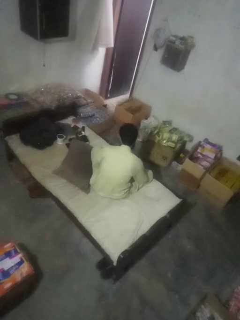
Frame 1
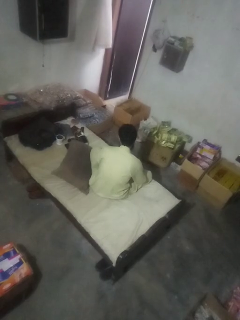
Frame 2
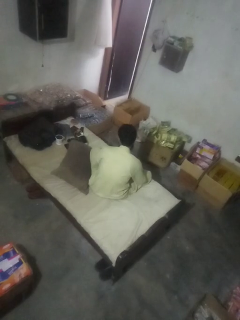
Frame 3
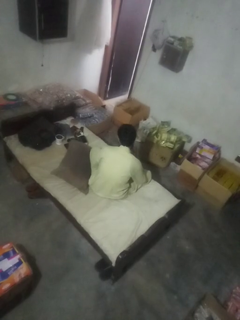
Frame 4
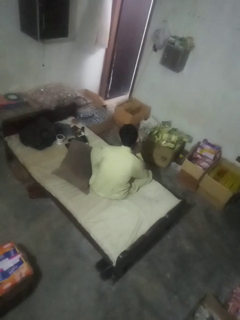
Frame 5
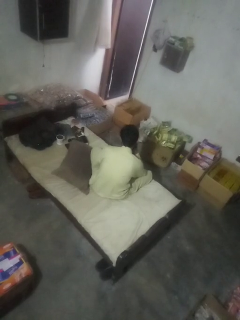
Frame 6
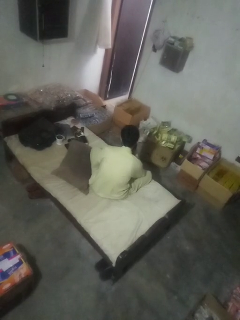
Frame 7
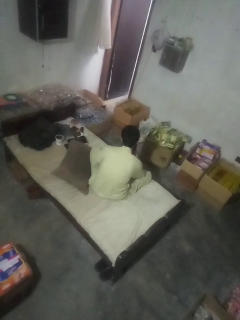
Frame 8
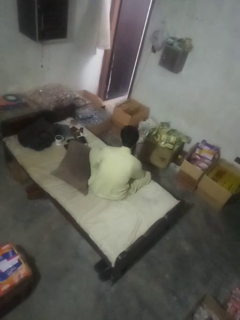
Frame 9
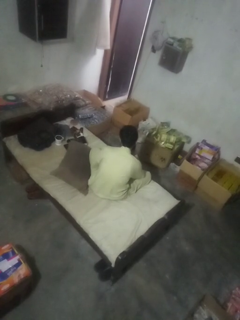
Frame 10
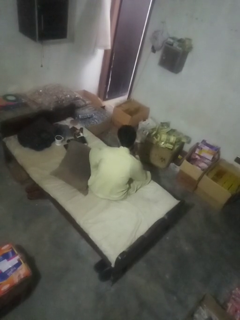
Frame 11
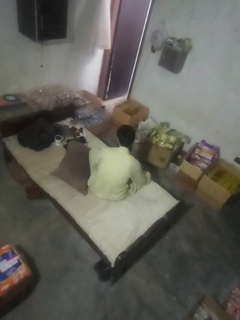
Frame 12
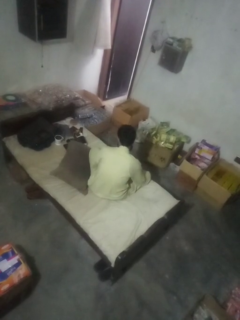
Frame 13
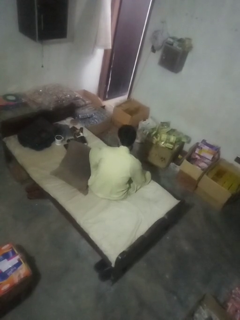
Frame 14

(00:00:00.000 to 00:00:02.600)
person strokes chin

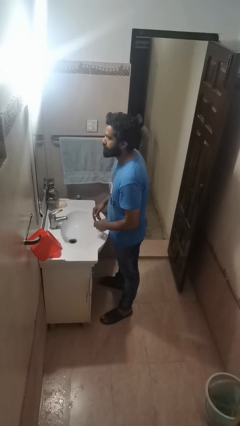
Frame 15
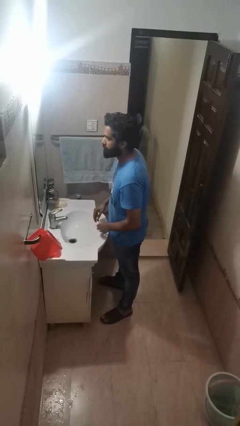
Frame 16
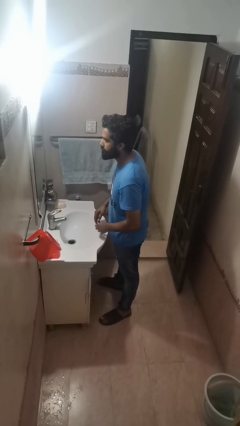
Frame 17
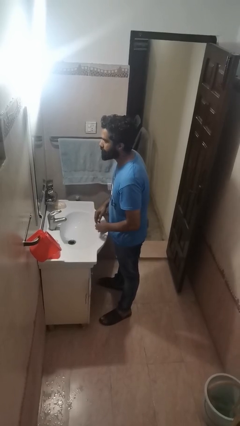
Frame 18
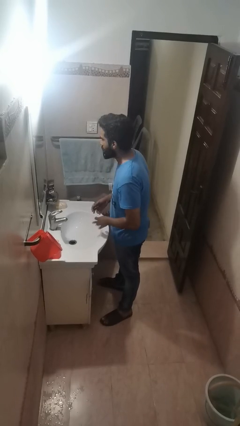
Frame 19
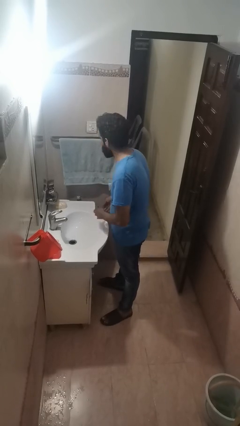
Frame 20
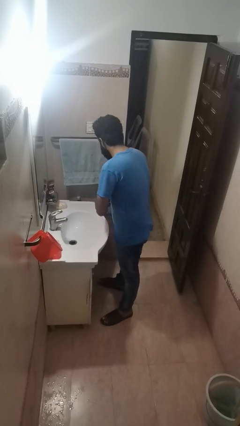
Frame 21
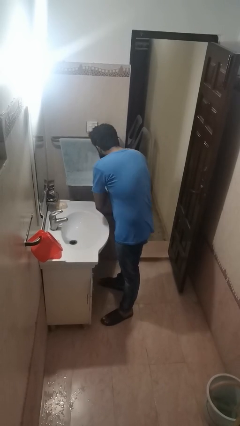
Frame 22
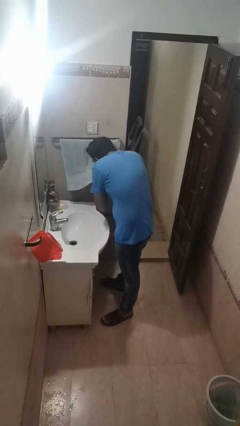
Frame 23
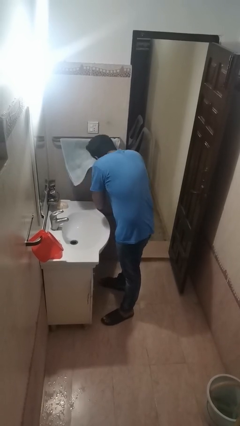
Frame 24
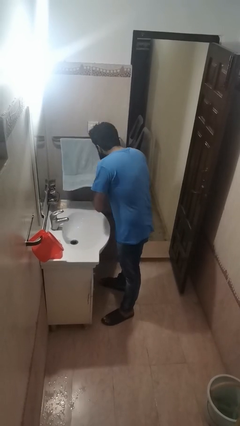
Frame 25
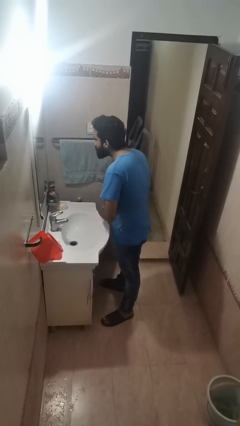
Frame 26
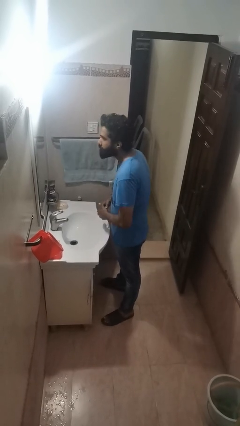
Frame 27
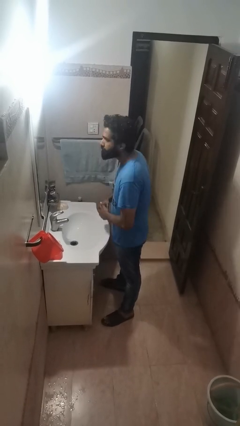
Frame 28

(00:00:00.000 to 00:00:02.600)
person dries face with towel

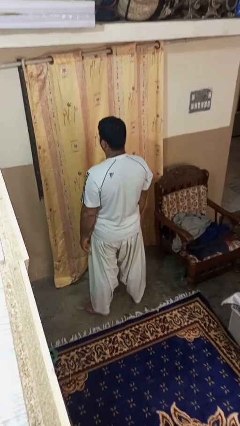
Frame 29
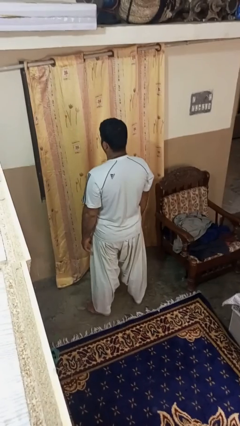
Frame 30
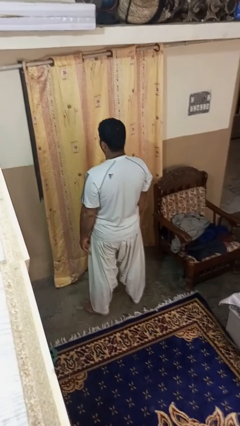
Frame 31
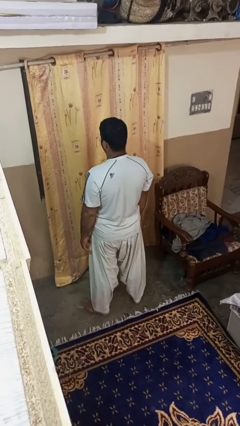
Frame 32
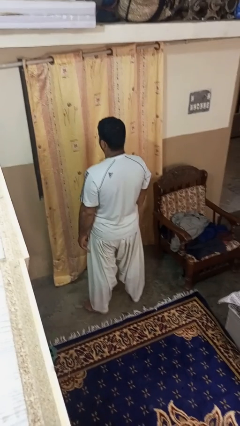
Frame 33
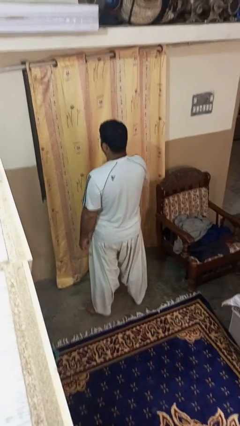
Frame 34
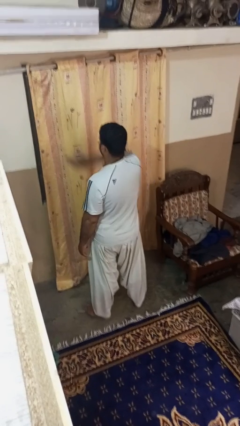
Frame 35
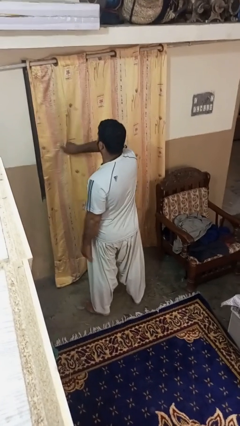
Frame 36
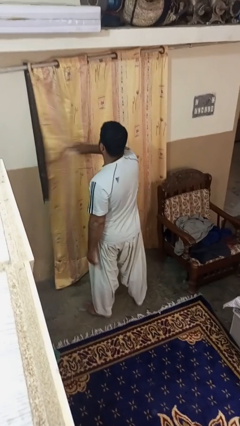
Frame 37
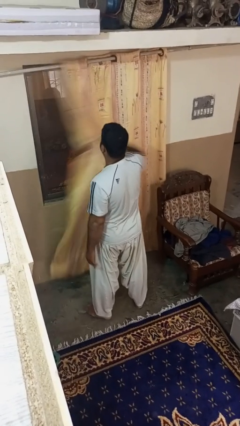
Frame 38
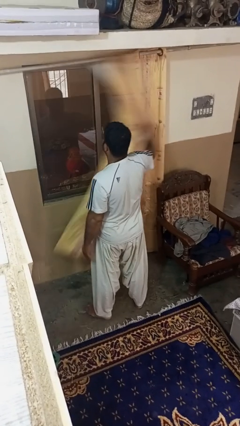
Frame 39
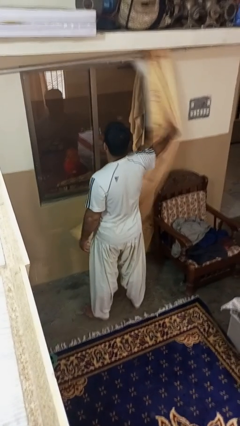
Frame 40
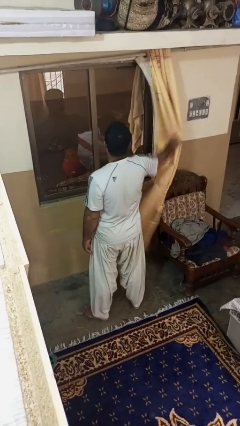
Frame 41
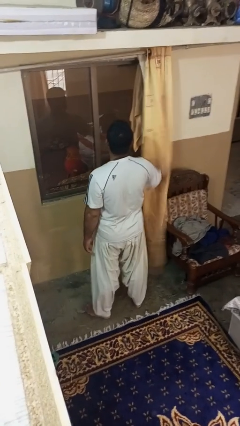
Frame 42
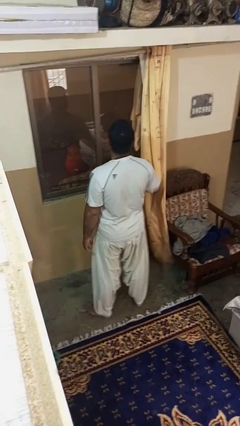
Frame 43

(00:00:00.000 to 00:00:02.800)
person opens curtains

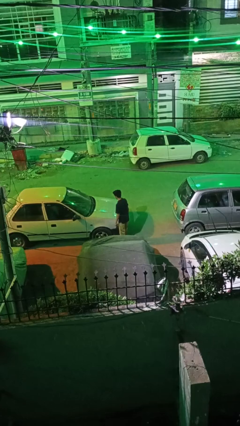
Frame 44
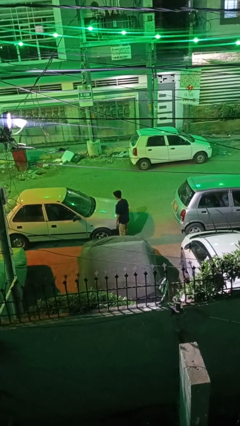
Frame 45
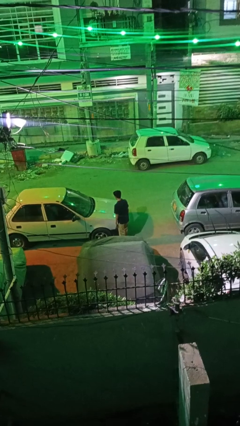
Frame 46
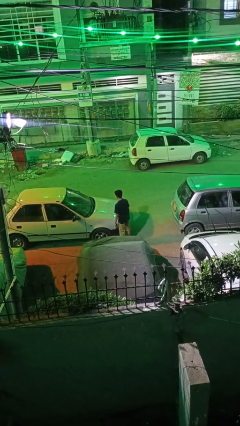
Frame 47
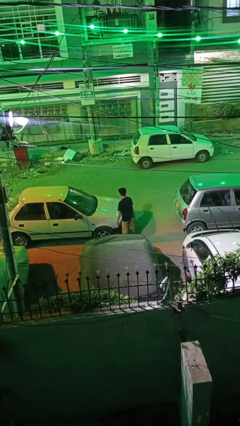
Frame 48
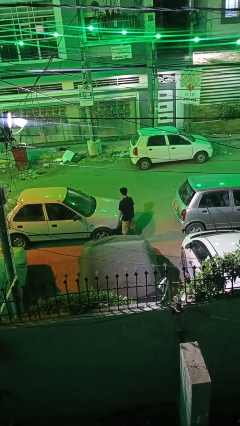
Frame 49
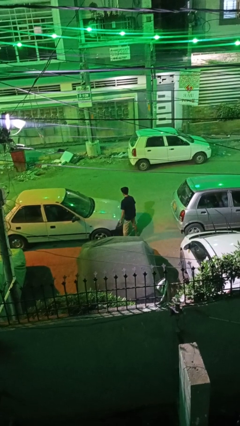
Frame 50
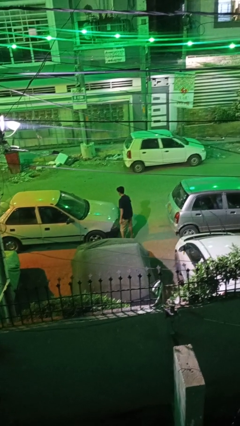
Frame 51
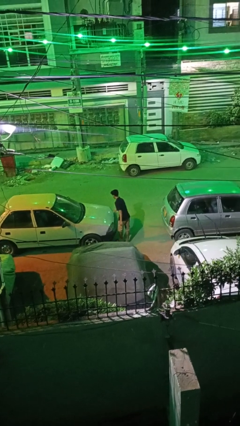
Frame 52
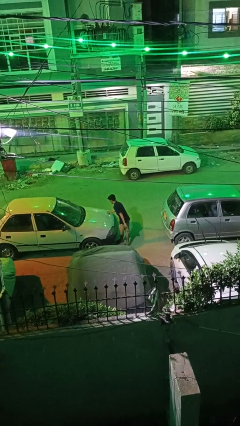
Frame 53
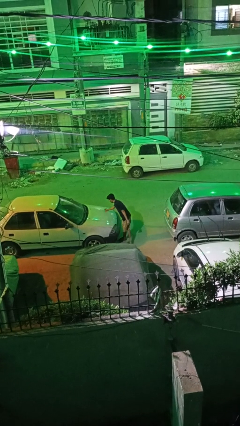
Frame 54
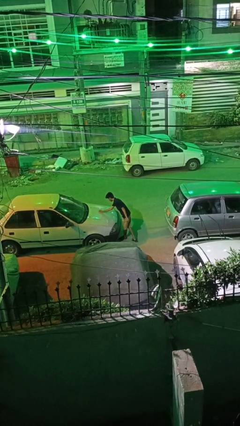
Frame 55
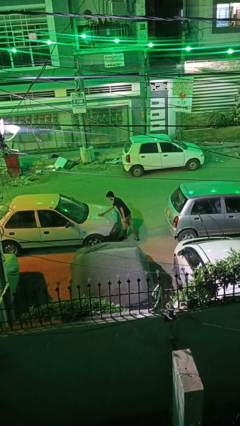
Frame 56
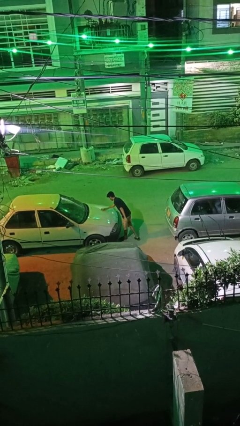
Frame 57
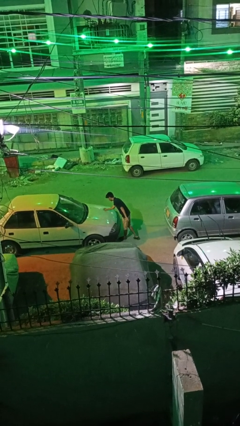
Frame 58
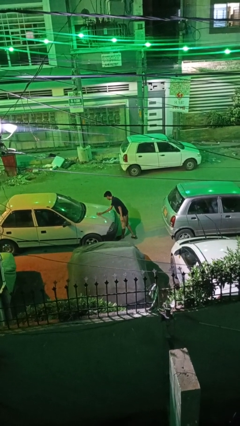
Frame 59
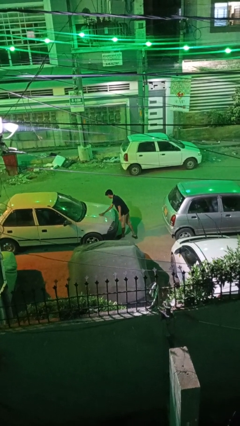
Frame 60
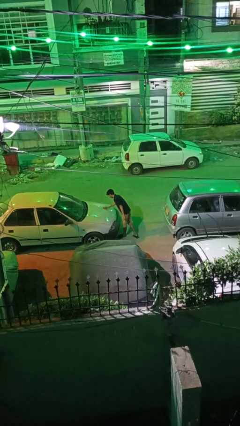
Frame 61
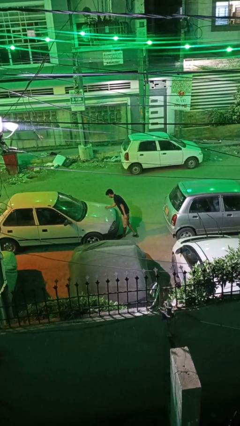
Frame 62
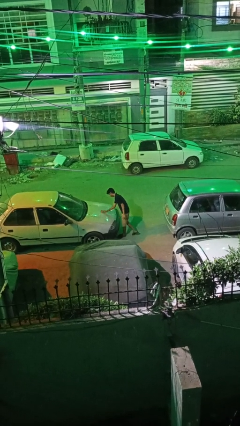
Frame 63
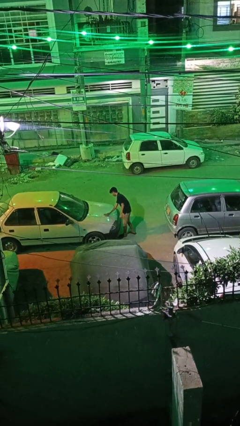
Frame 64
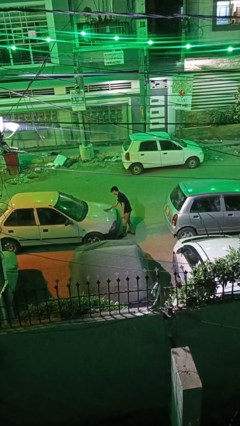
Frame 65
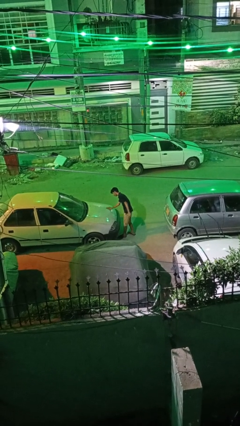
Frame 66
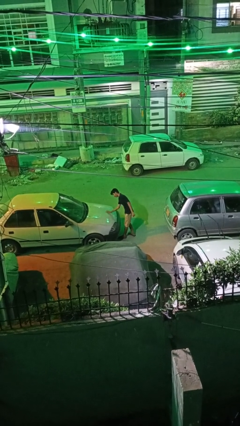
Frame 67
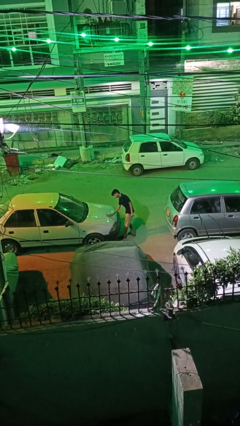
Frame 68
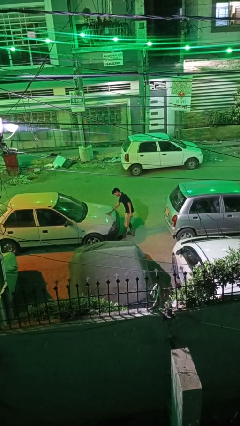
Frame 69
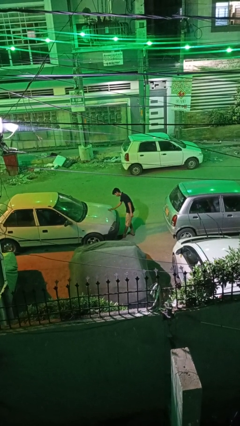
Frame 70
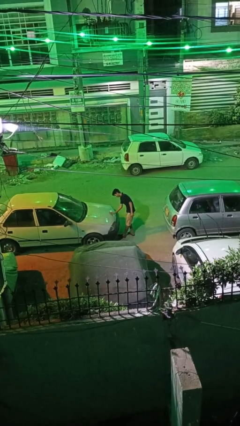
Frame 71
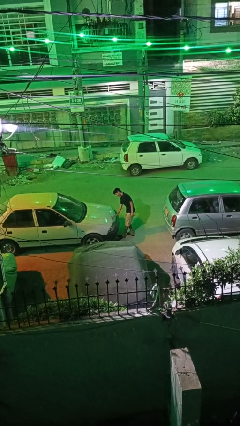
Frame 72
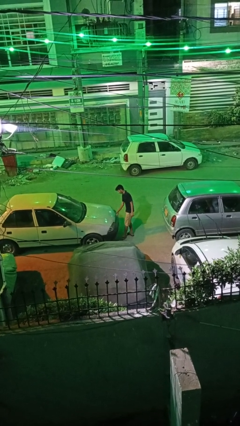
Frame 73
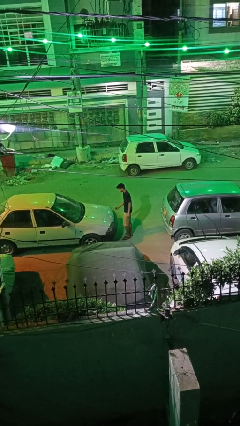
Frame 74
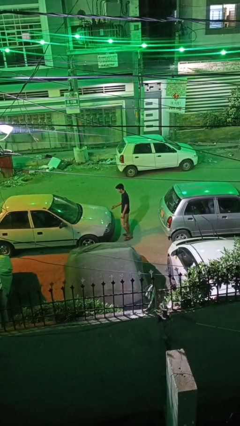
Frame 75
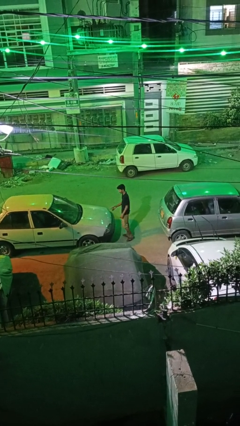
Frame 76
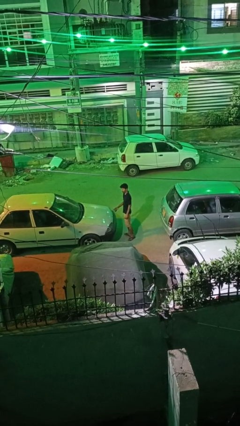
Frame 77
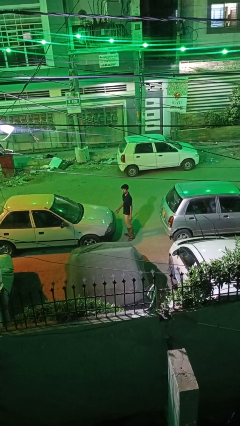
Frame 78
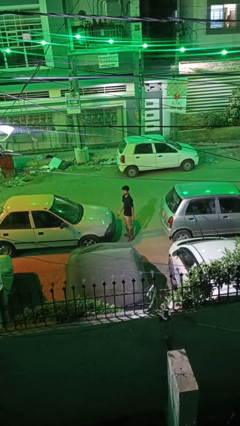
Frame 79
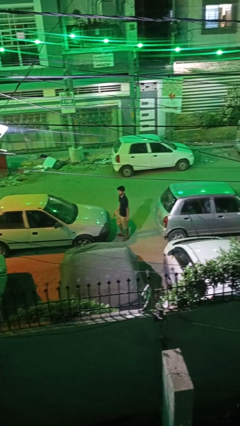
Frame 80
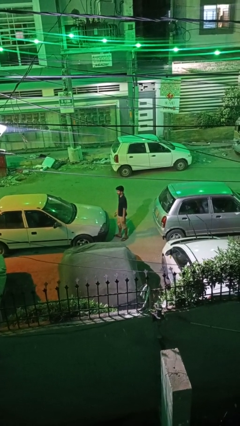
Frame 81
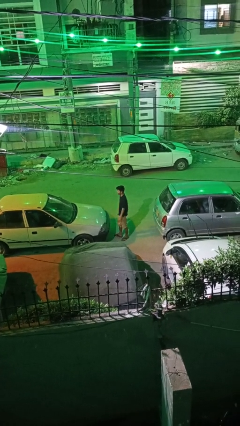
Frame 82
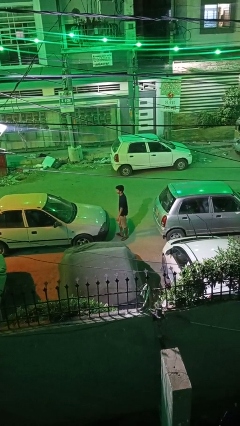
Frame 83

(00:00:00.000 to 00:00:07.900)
person polishes car with rag

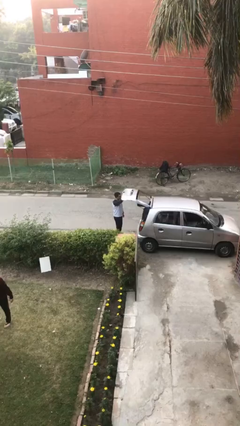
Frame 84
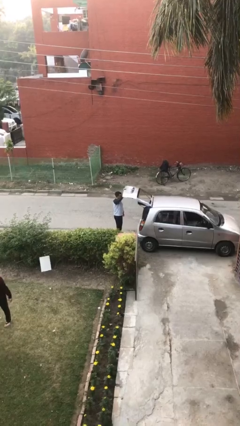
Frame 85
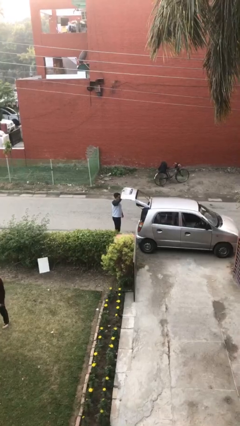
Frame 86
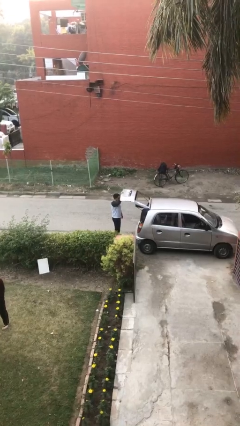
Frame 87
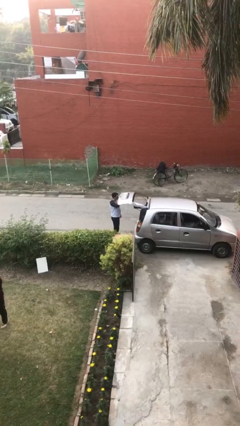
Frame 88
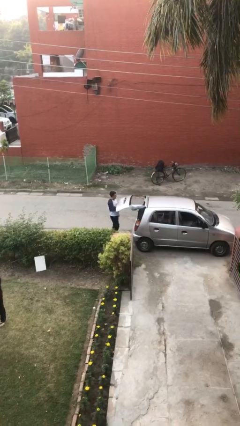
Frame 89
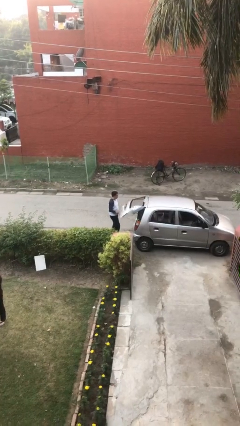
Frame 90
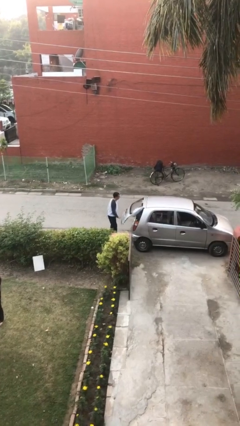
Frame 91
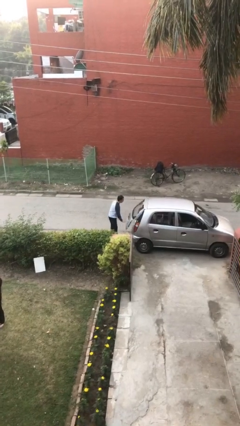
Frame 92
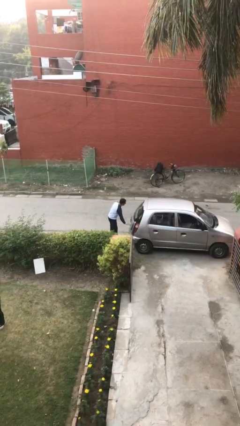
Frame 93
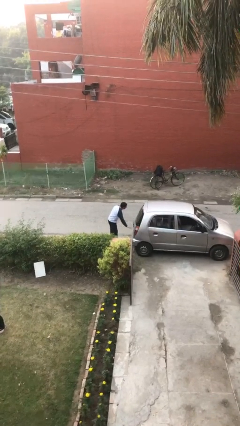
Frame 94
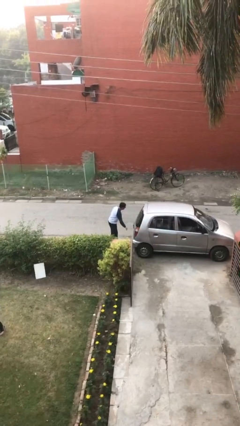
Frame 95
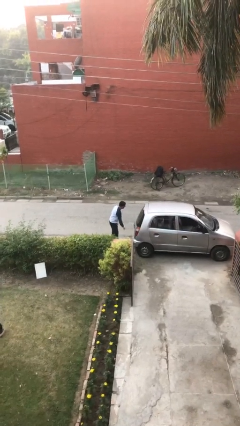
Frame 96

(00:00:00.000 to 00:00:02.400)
person closes car trunk
